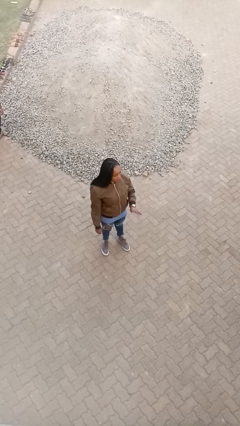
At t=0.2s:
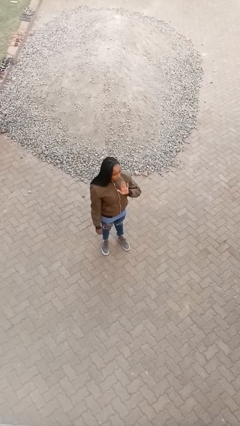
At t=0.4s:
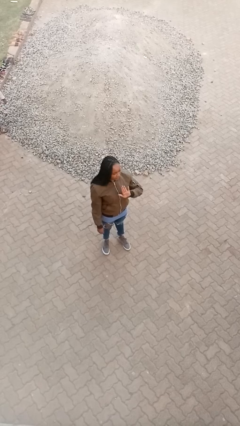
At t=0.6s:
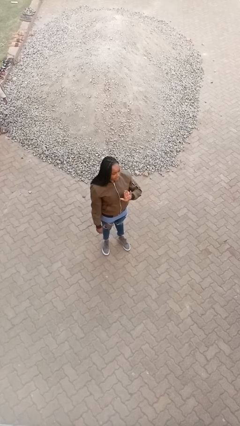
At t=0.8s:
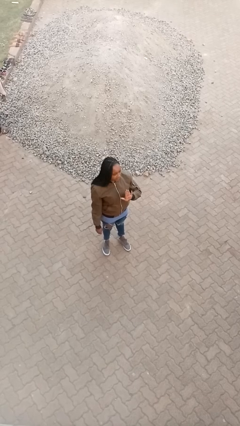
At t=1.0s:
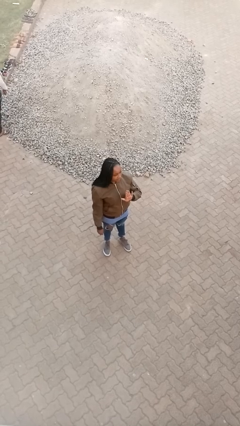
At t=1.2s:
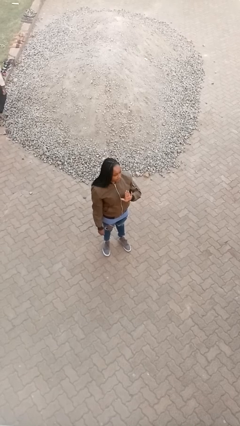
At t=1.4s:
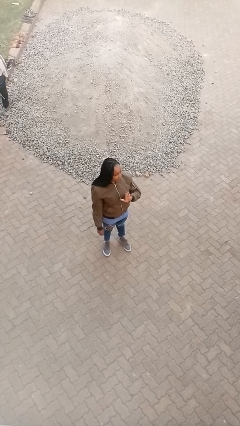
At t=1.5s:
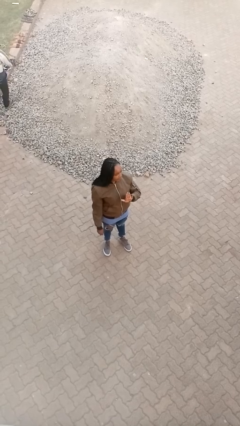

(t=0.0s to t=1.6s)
person gestures stop

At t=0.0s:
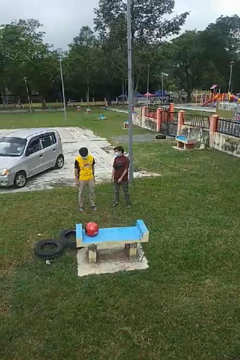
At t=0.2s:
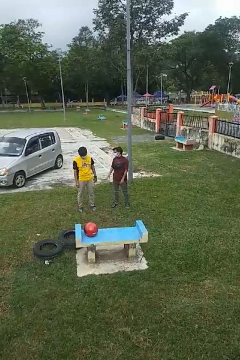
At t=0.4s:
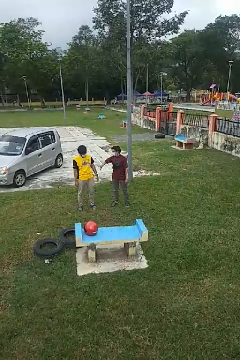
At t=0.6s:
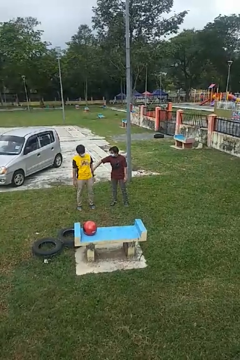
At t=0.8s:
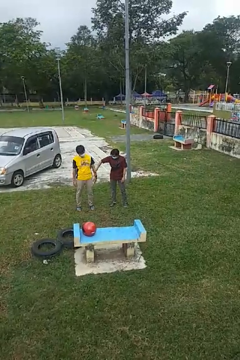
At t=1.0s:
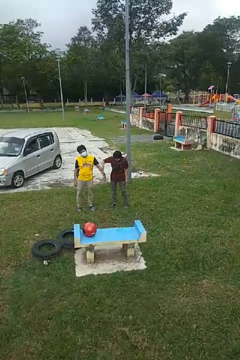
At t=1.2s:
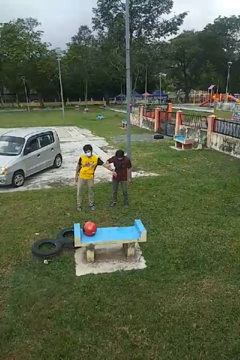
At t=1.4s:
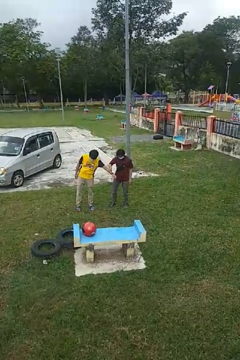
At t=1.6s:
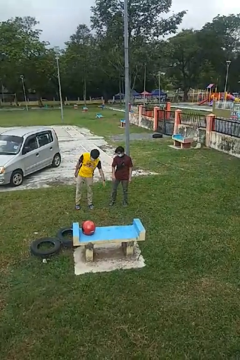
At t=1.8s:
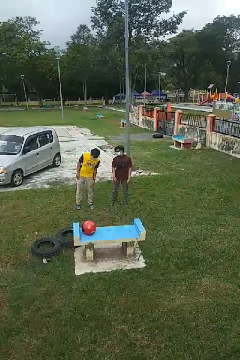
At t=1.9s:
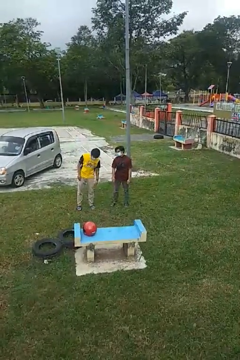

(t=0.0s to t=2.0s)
person grabs person by forearm

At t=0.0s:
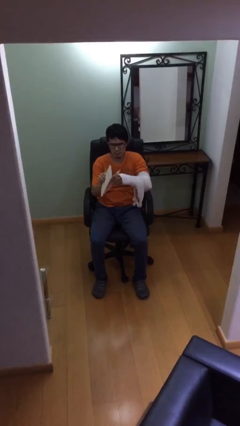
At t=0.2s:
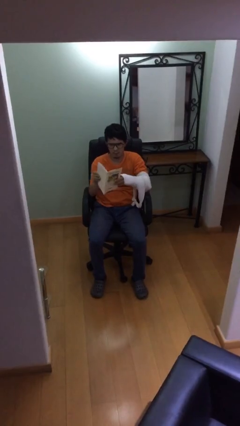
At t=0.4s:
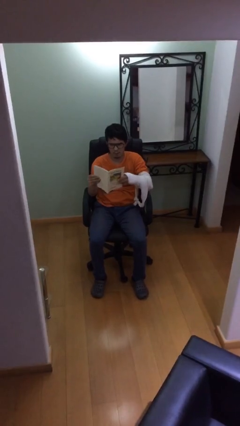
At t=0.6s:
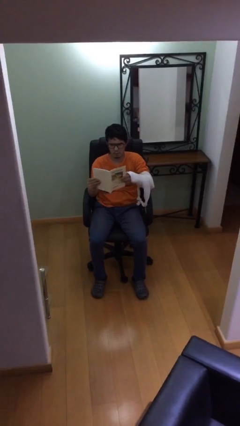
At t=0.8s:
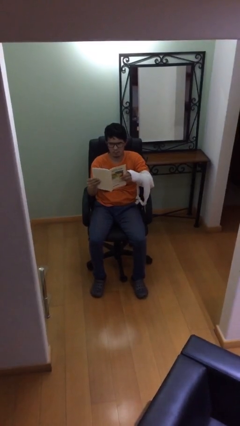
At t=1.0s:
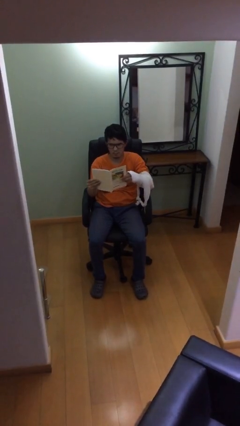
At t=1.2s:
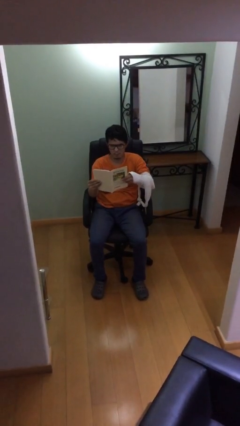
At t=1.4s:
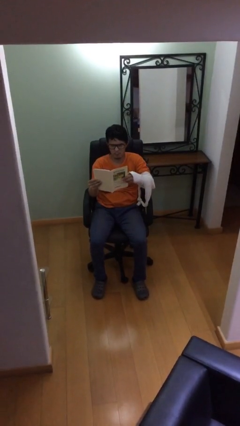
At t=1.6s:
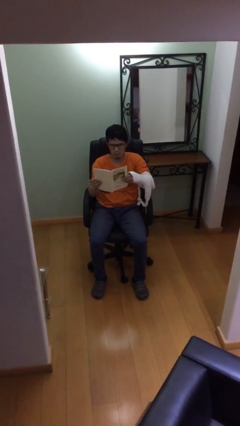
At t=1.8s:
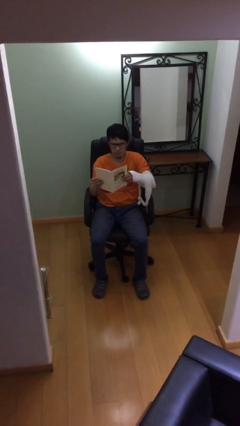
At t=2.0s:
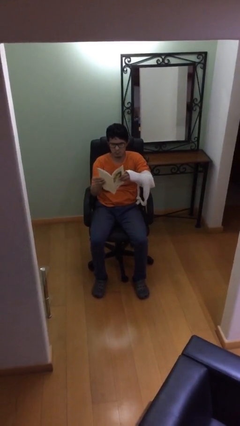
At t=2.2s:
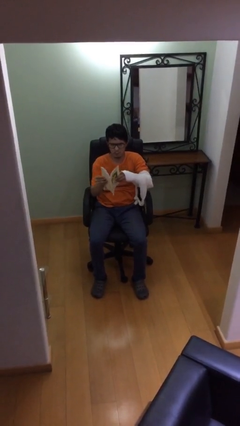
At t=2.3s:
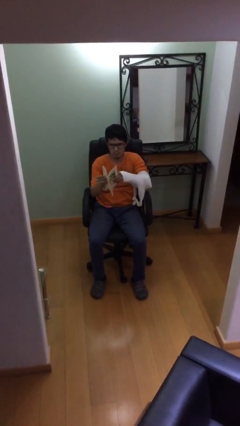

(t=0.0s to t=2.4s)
person reads document

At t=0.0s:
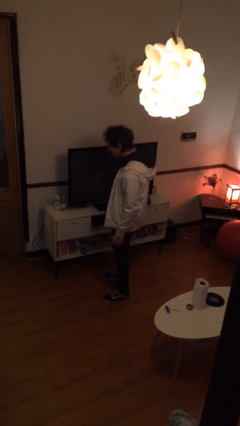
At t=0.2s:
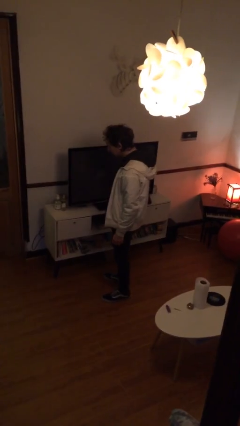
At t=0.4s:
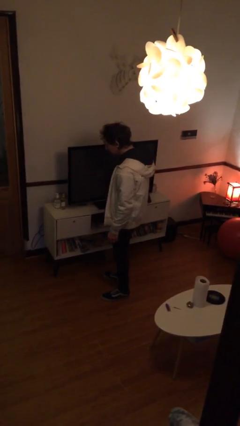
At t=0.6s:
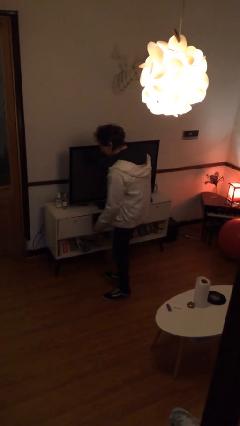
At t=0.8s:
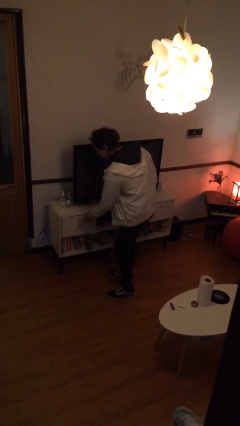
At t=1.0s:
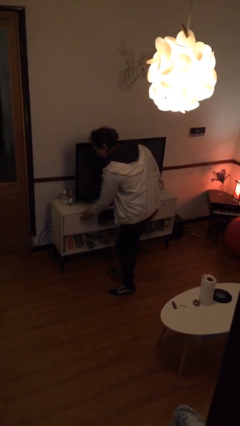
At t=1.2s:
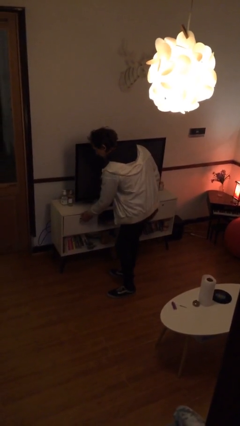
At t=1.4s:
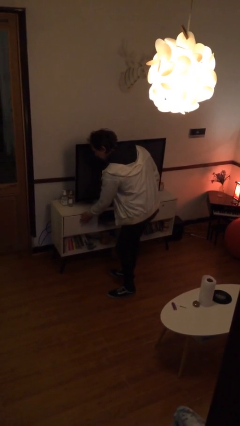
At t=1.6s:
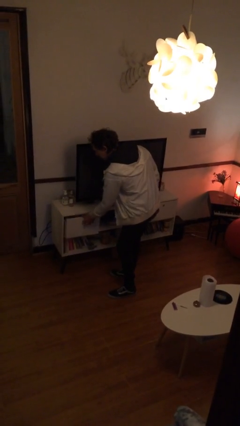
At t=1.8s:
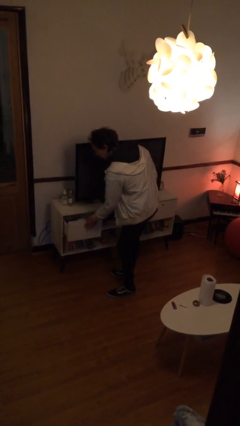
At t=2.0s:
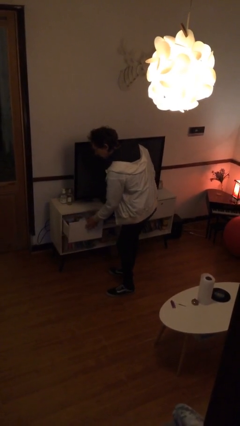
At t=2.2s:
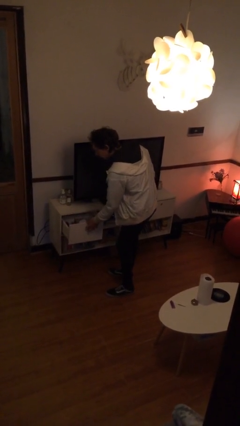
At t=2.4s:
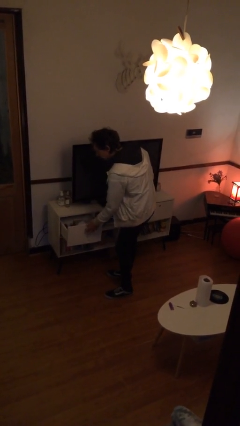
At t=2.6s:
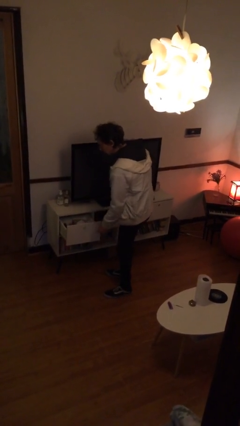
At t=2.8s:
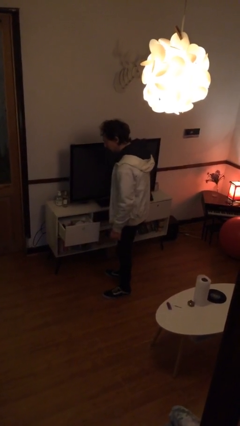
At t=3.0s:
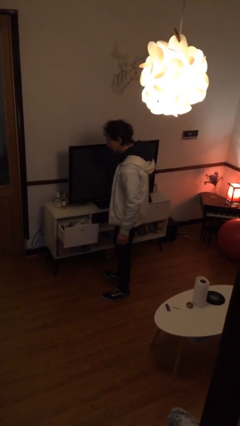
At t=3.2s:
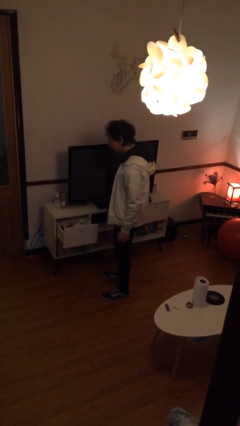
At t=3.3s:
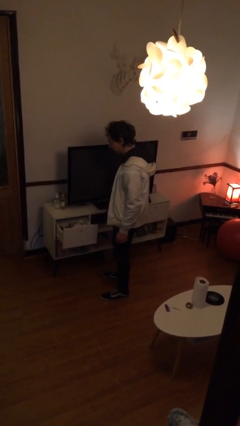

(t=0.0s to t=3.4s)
person opens dresser drawer

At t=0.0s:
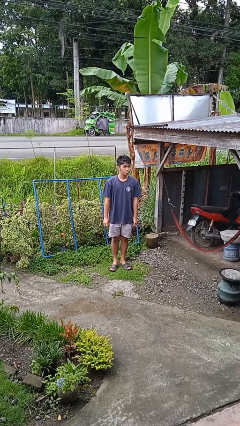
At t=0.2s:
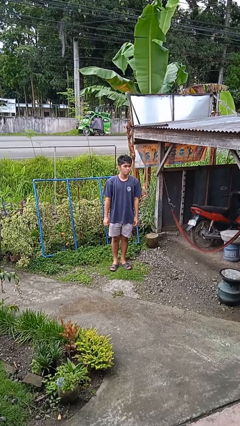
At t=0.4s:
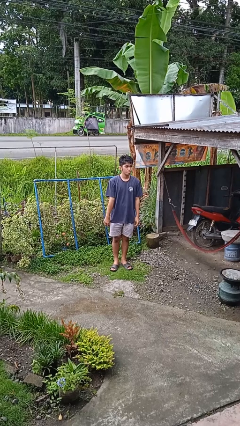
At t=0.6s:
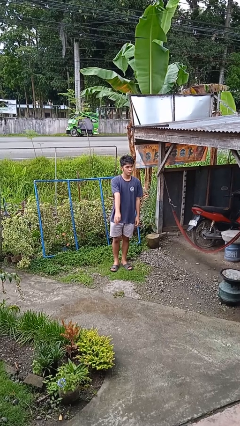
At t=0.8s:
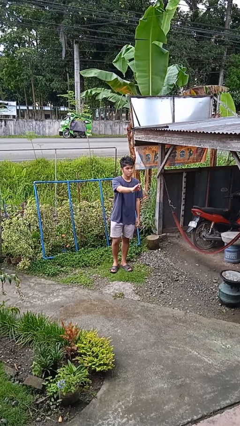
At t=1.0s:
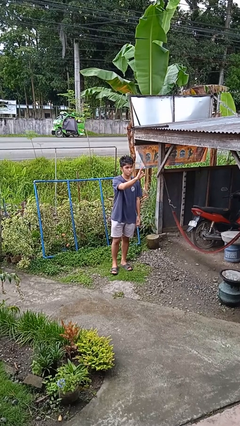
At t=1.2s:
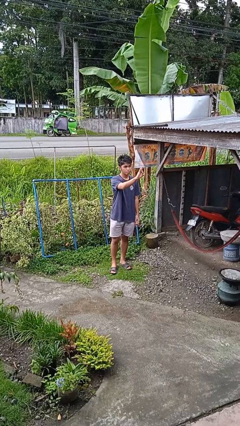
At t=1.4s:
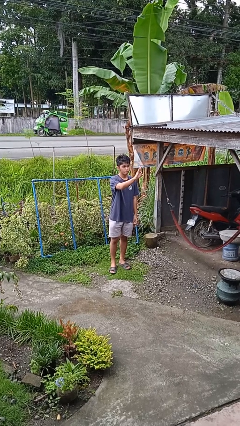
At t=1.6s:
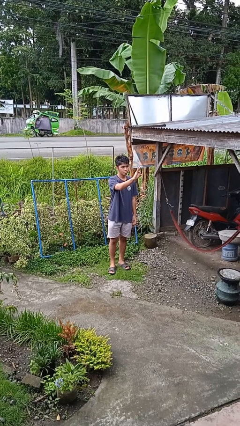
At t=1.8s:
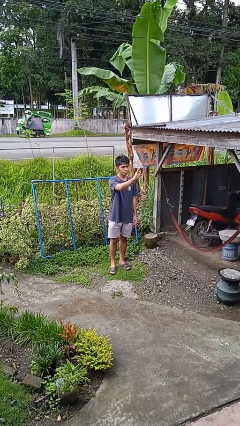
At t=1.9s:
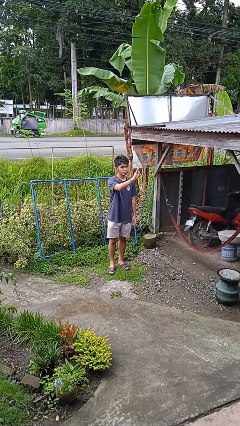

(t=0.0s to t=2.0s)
person gestures number three

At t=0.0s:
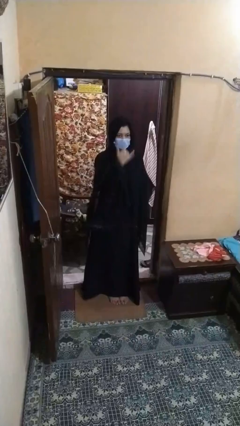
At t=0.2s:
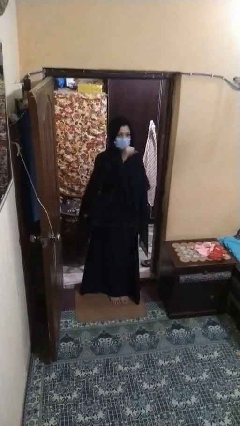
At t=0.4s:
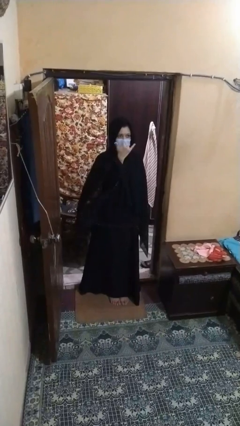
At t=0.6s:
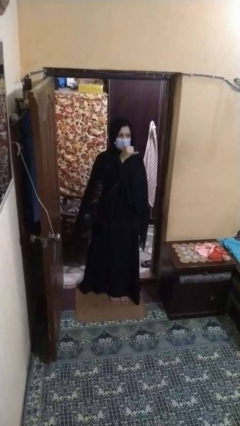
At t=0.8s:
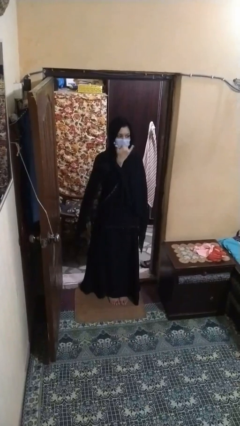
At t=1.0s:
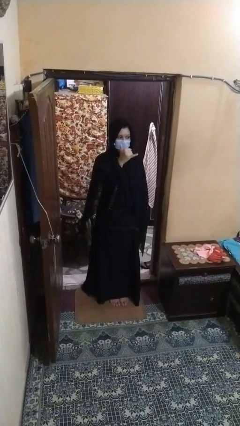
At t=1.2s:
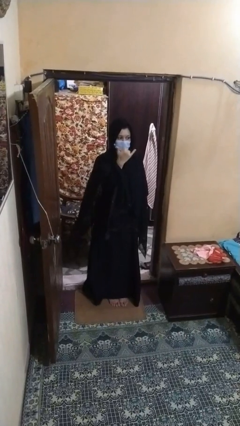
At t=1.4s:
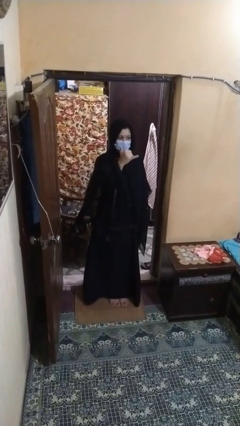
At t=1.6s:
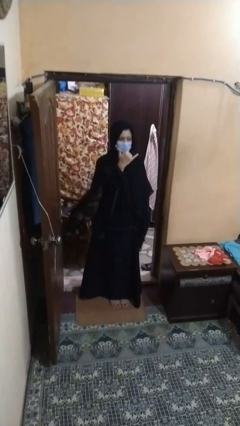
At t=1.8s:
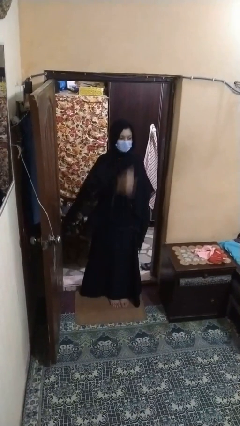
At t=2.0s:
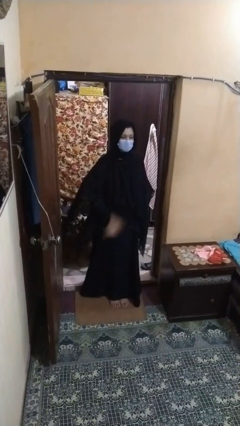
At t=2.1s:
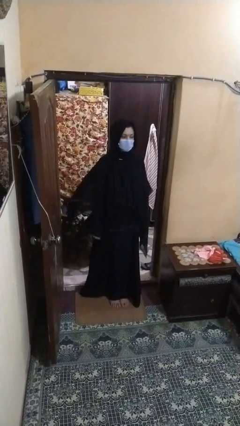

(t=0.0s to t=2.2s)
person gestures hang loose

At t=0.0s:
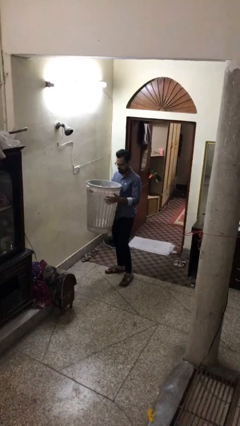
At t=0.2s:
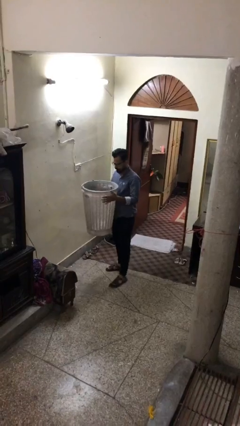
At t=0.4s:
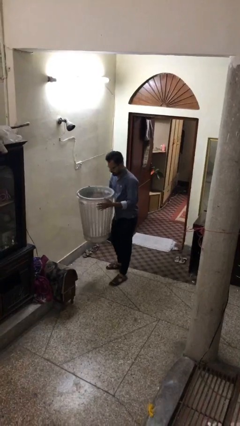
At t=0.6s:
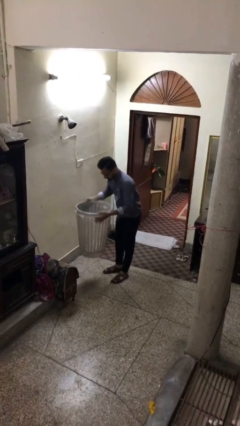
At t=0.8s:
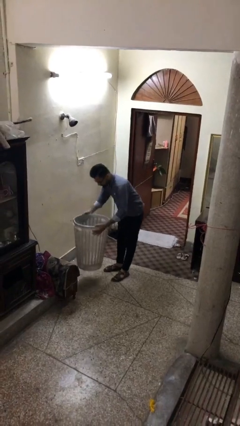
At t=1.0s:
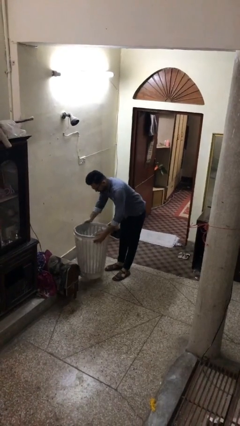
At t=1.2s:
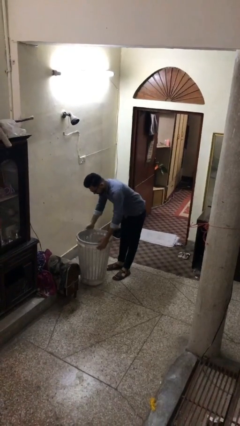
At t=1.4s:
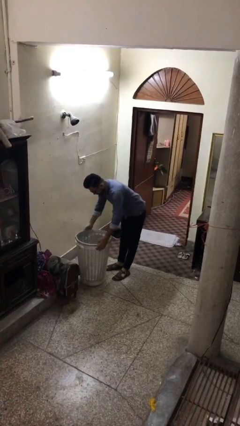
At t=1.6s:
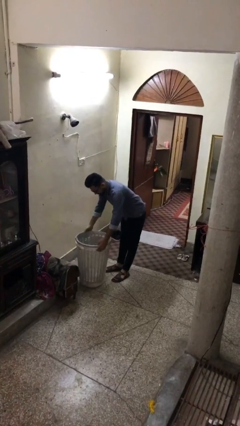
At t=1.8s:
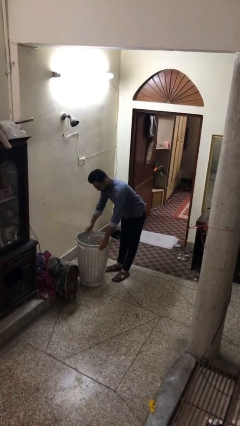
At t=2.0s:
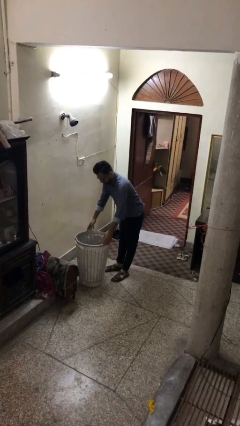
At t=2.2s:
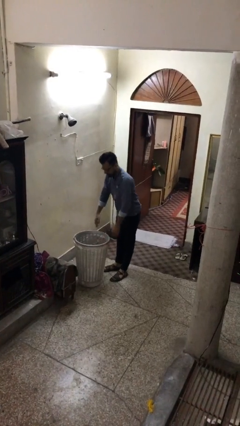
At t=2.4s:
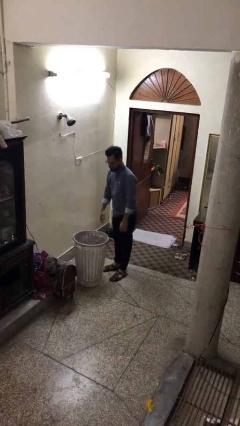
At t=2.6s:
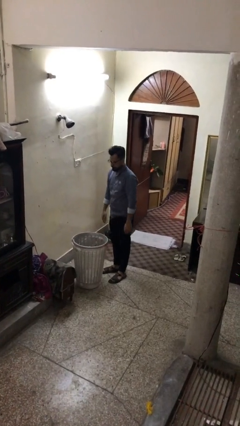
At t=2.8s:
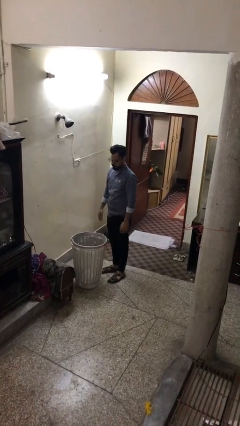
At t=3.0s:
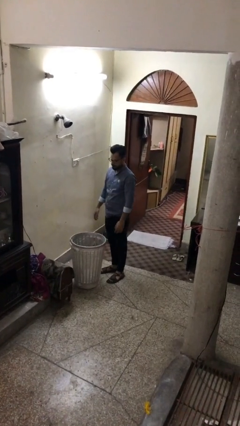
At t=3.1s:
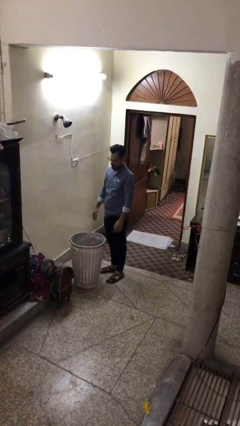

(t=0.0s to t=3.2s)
person puts down object on floor

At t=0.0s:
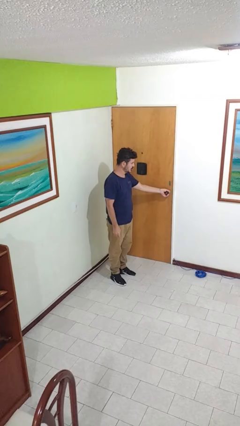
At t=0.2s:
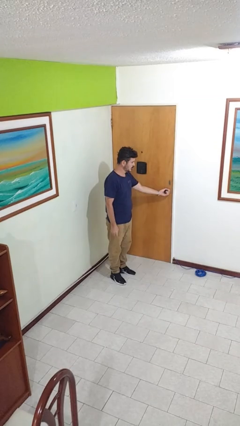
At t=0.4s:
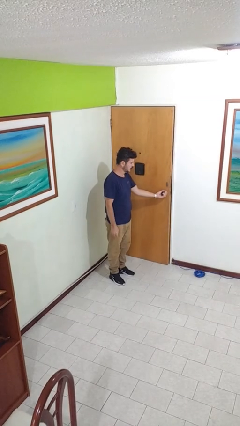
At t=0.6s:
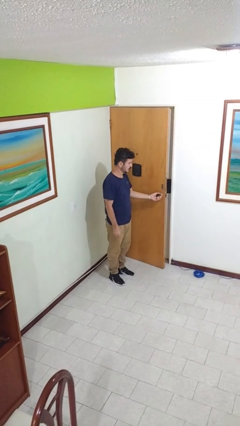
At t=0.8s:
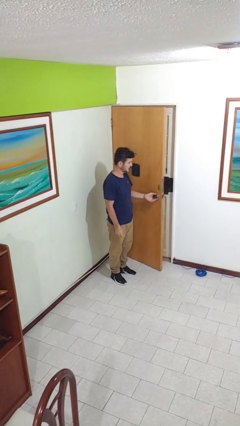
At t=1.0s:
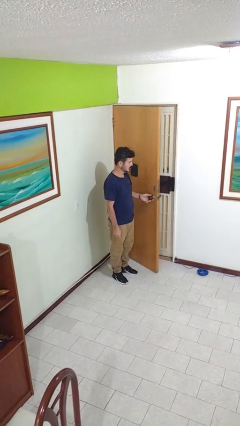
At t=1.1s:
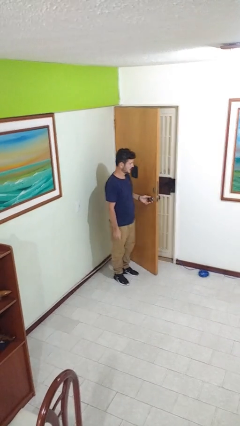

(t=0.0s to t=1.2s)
person opens facility door
